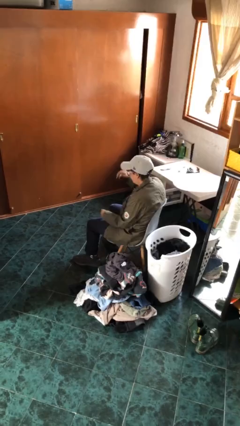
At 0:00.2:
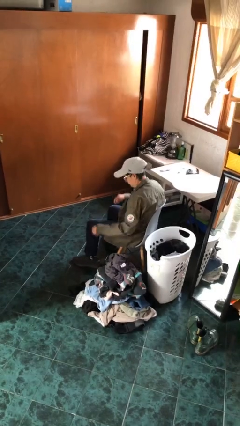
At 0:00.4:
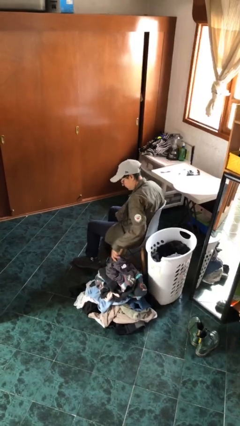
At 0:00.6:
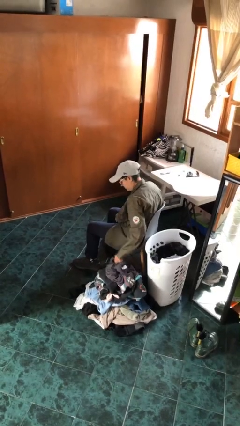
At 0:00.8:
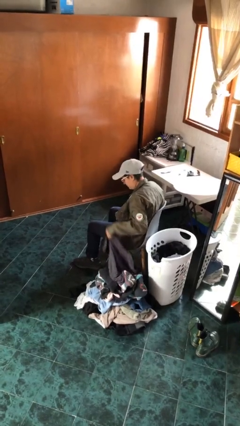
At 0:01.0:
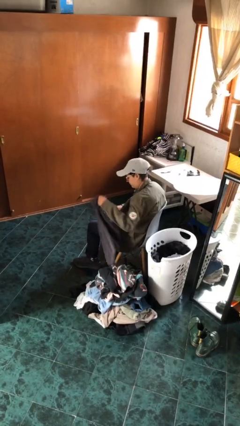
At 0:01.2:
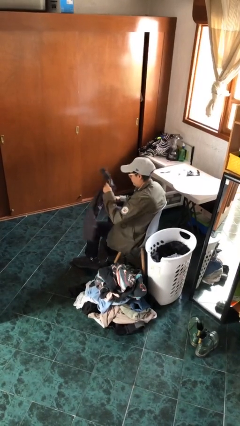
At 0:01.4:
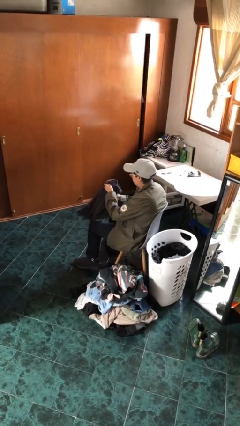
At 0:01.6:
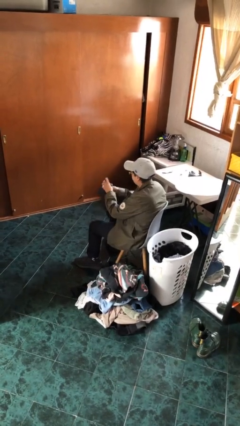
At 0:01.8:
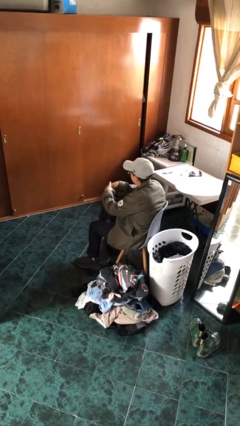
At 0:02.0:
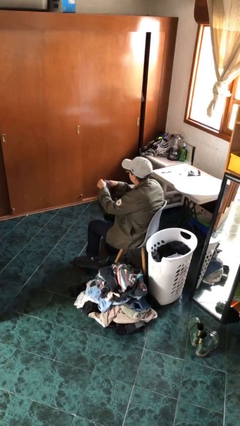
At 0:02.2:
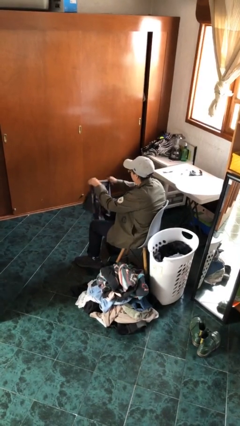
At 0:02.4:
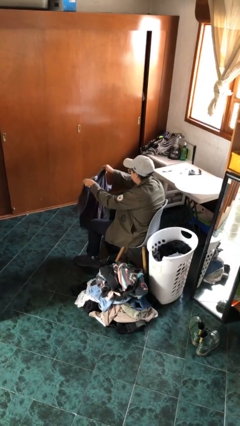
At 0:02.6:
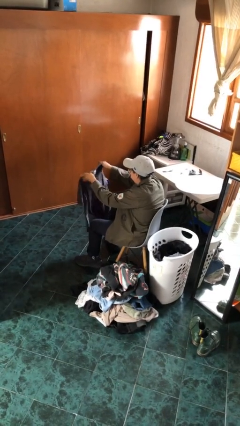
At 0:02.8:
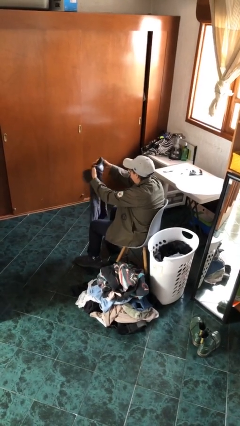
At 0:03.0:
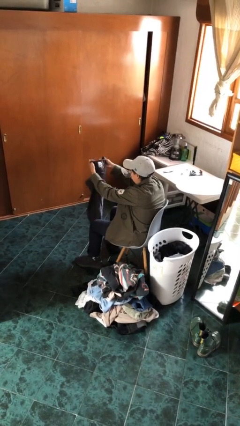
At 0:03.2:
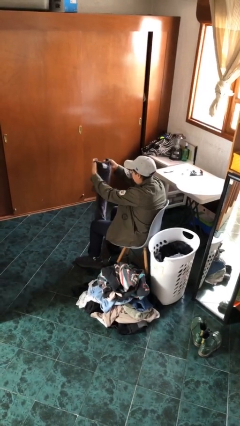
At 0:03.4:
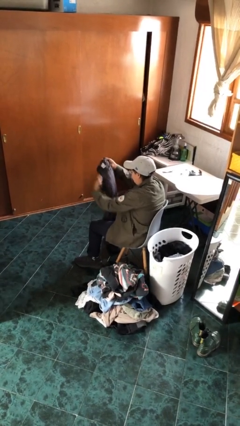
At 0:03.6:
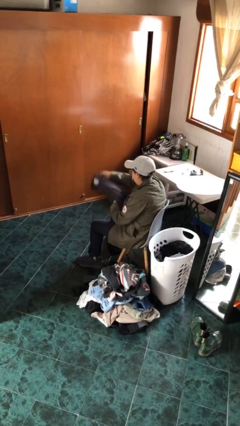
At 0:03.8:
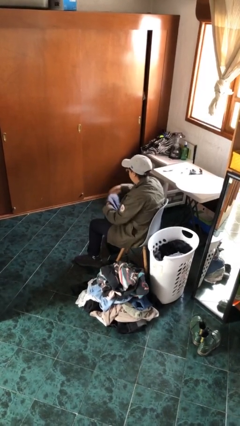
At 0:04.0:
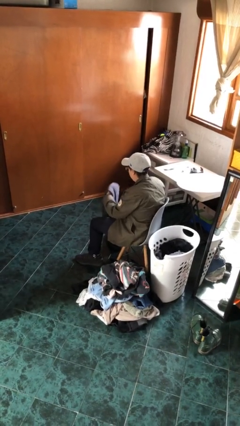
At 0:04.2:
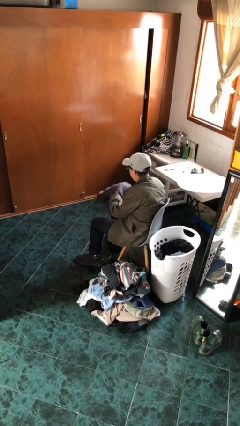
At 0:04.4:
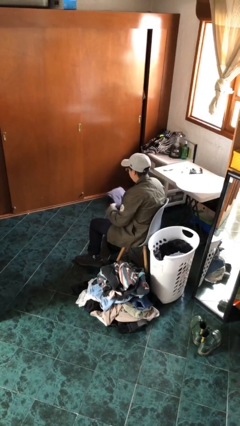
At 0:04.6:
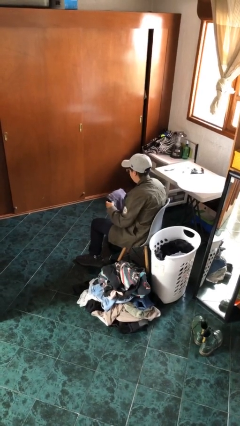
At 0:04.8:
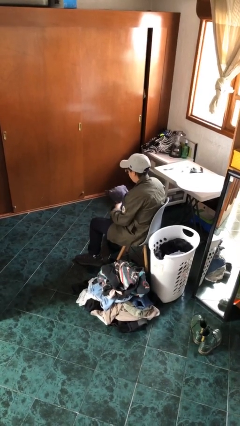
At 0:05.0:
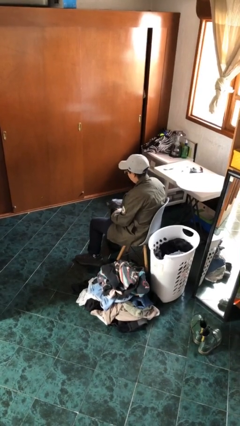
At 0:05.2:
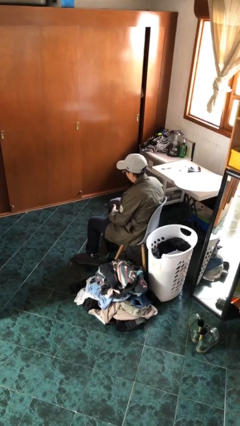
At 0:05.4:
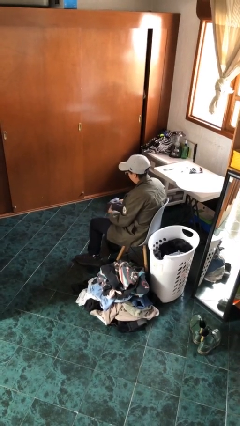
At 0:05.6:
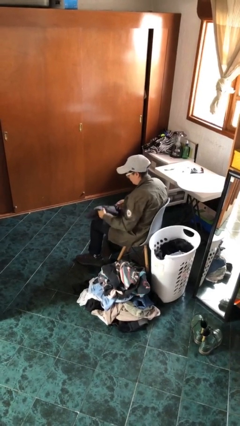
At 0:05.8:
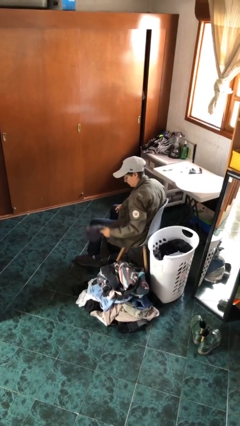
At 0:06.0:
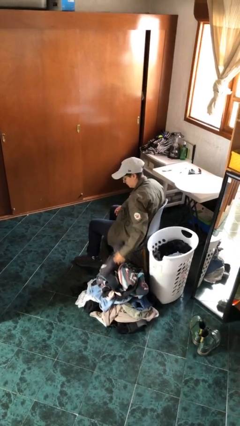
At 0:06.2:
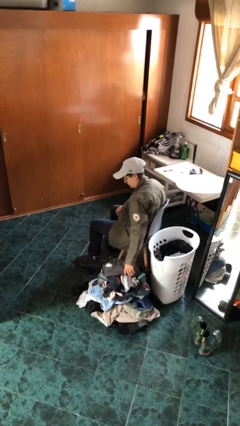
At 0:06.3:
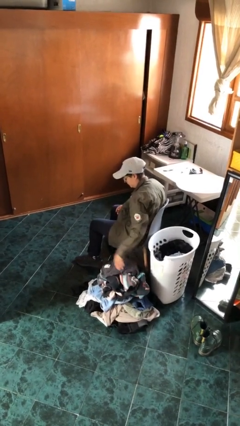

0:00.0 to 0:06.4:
person folds shirt

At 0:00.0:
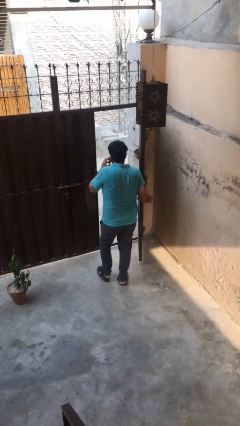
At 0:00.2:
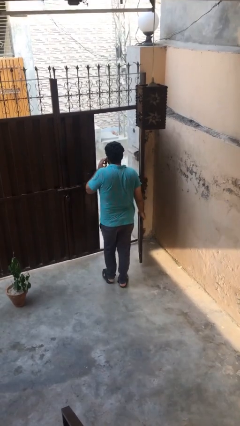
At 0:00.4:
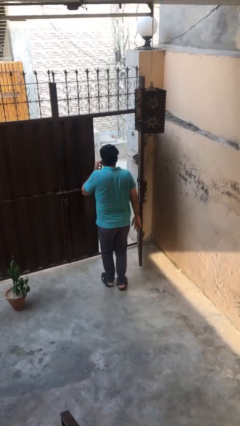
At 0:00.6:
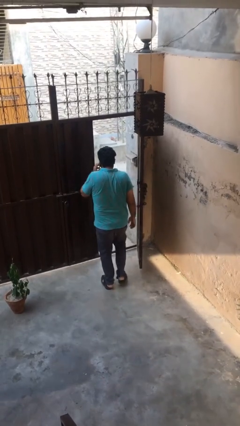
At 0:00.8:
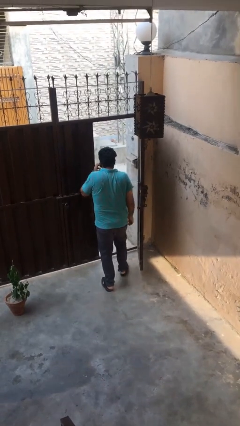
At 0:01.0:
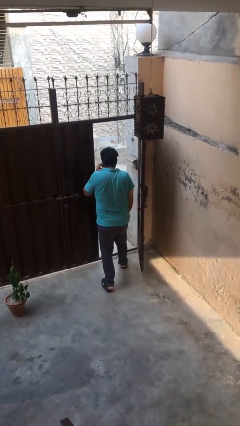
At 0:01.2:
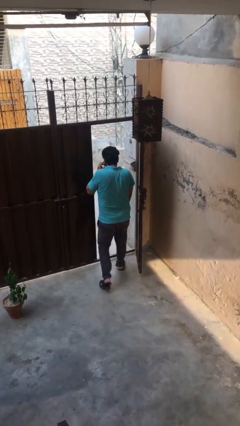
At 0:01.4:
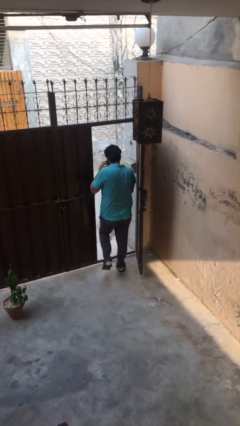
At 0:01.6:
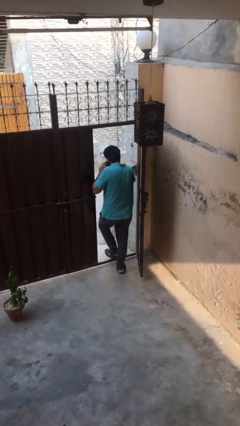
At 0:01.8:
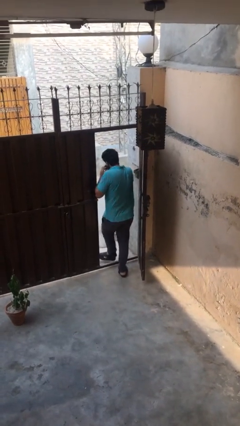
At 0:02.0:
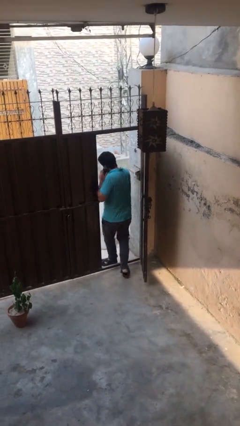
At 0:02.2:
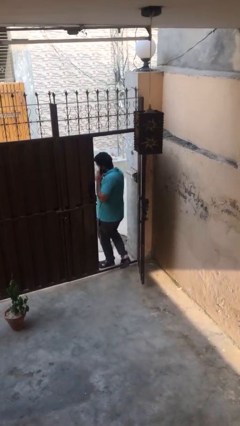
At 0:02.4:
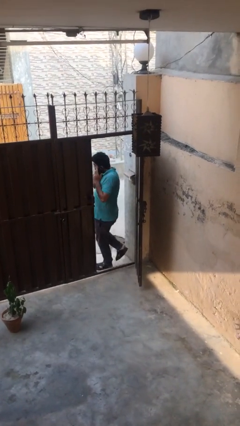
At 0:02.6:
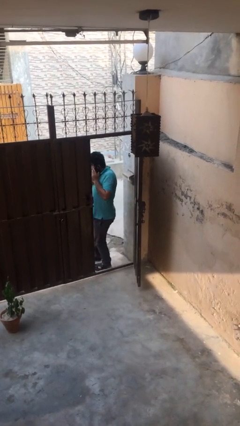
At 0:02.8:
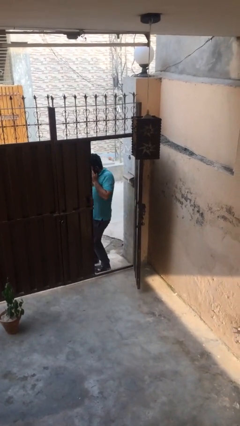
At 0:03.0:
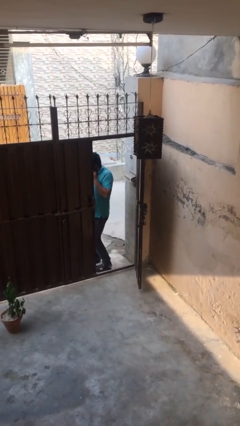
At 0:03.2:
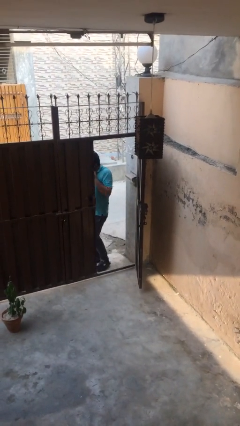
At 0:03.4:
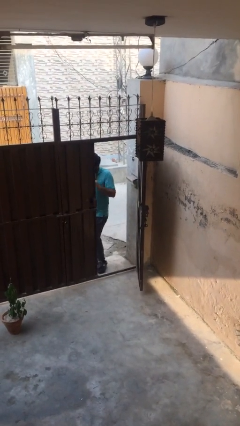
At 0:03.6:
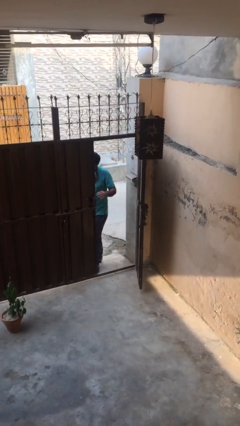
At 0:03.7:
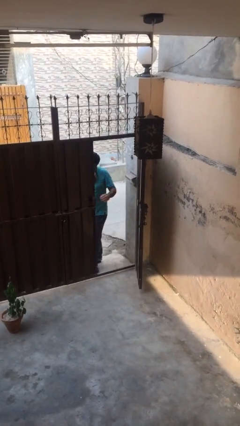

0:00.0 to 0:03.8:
person exits scene through structure

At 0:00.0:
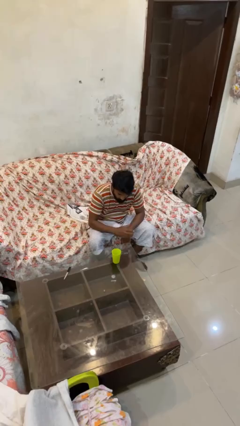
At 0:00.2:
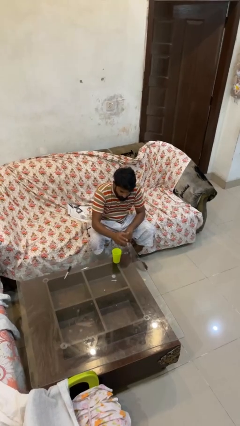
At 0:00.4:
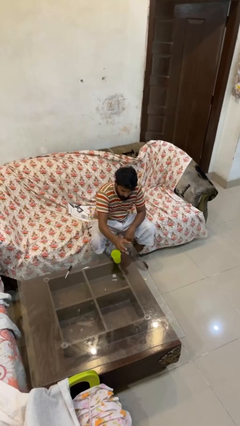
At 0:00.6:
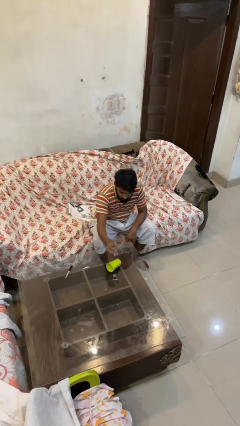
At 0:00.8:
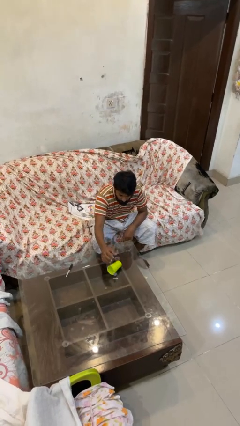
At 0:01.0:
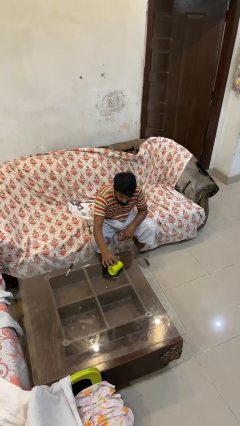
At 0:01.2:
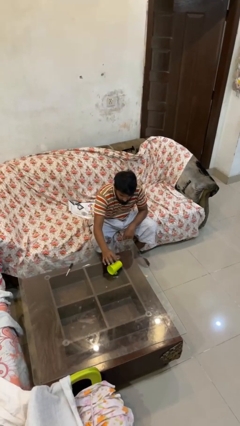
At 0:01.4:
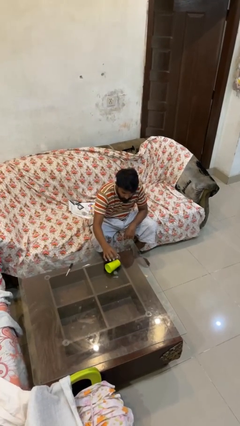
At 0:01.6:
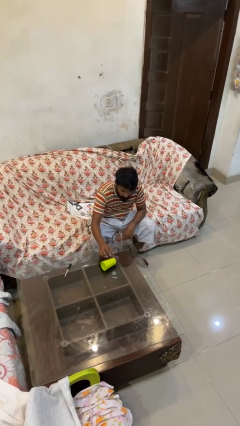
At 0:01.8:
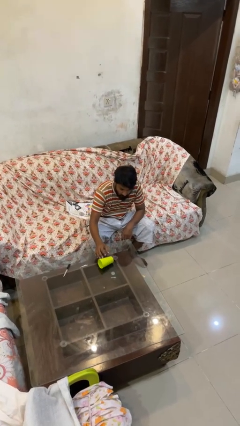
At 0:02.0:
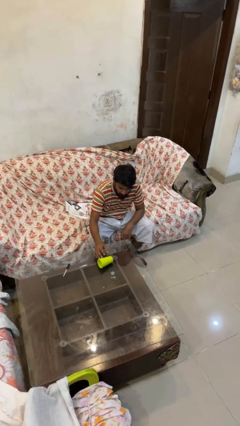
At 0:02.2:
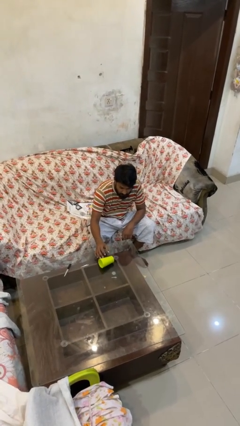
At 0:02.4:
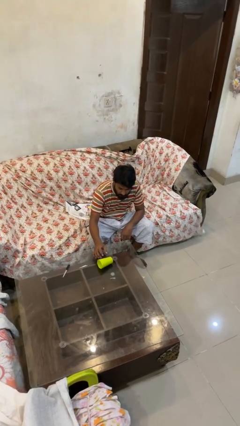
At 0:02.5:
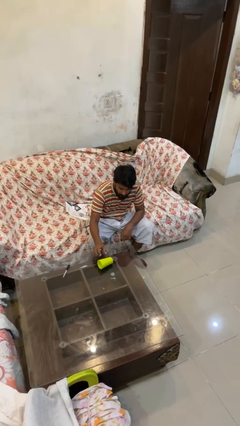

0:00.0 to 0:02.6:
person knocks over glass

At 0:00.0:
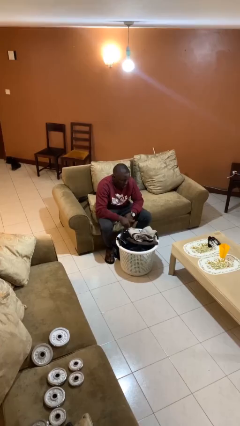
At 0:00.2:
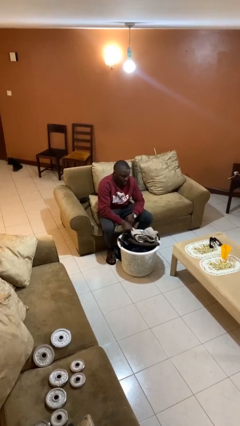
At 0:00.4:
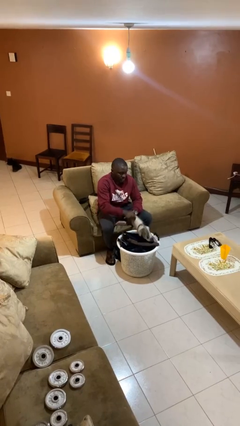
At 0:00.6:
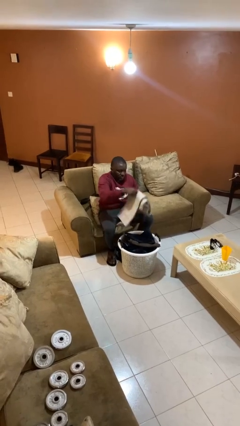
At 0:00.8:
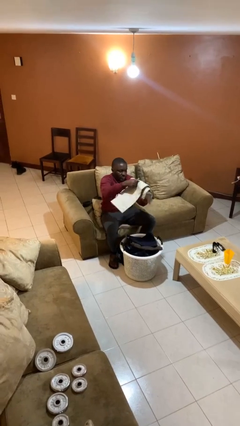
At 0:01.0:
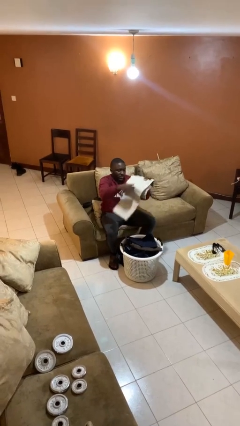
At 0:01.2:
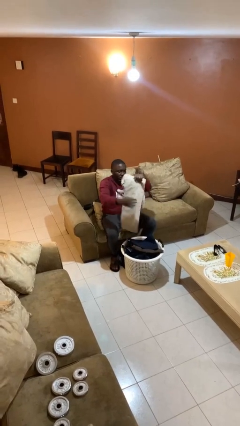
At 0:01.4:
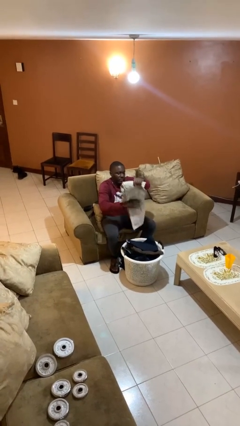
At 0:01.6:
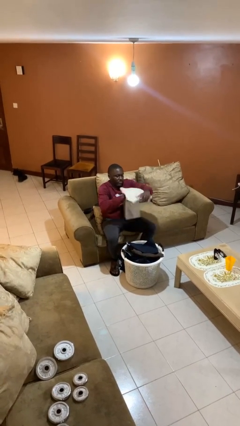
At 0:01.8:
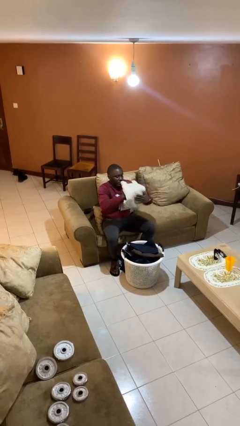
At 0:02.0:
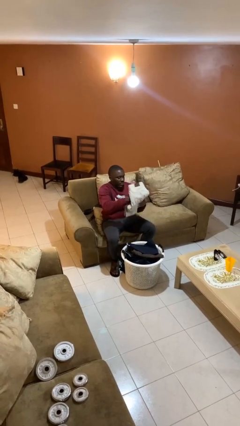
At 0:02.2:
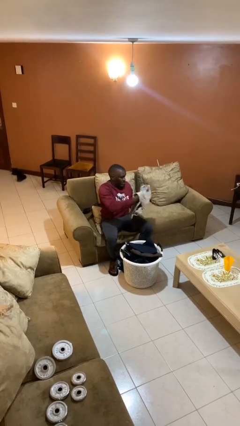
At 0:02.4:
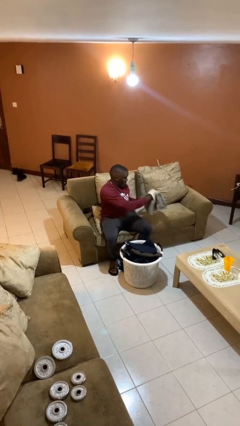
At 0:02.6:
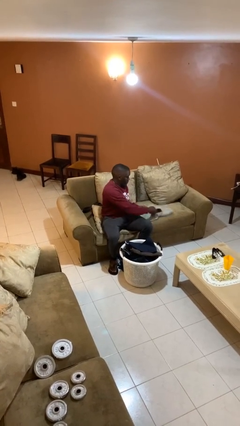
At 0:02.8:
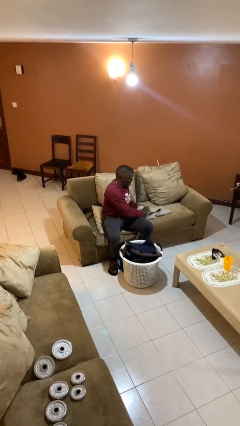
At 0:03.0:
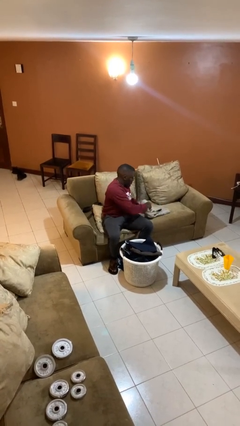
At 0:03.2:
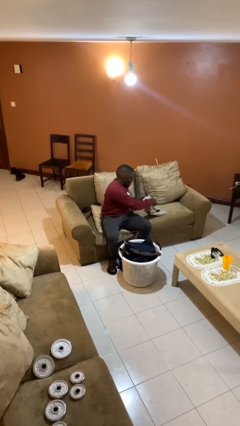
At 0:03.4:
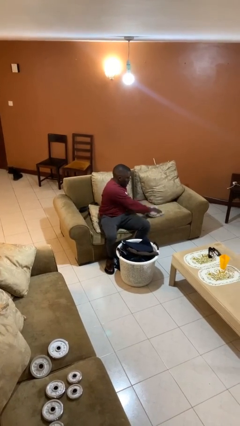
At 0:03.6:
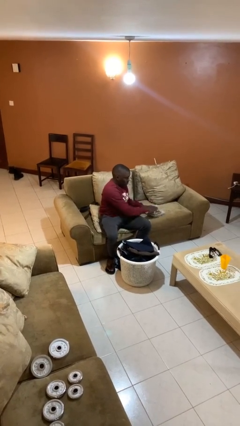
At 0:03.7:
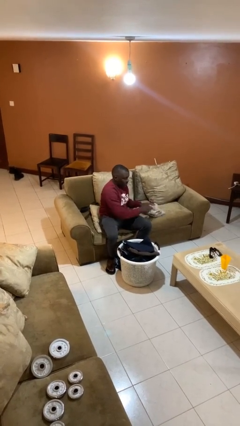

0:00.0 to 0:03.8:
person folds pants

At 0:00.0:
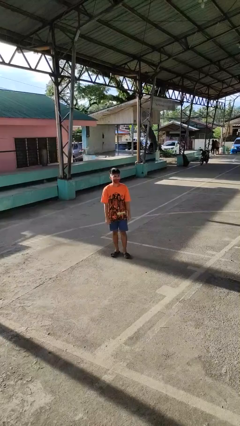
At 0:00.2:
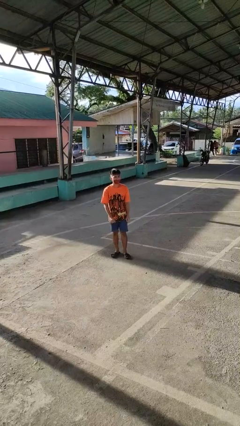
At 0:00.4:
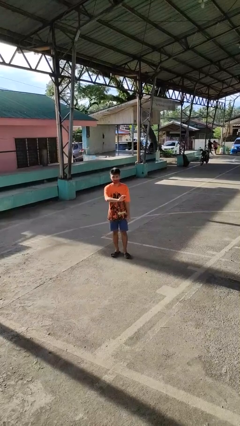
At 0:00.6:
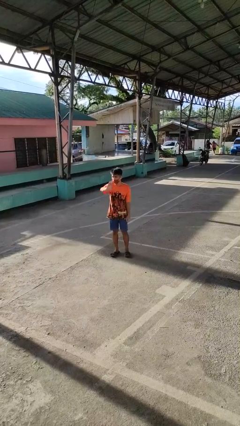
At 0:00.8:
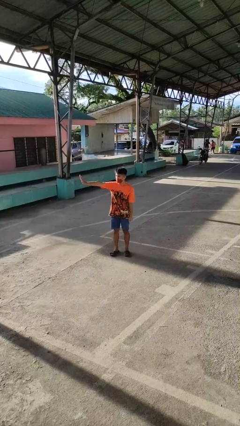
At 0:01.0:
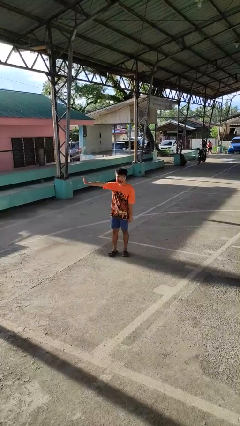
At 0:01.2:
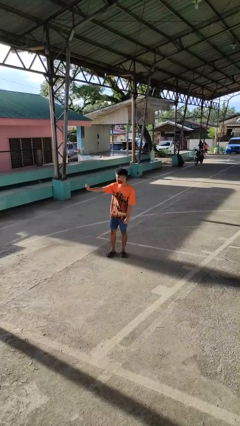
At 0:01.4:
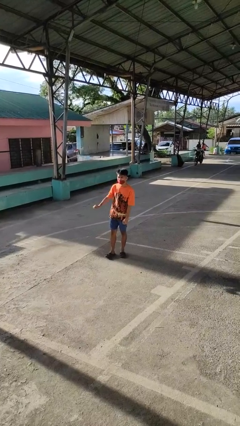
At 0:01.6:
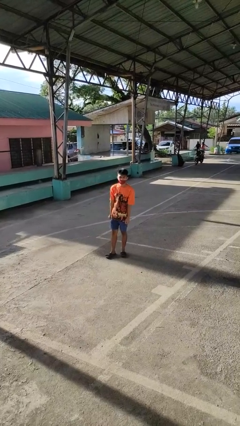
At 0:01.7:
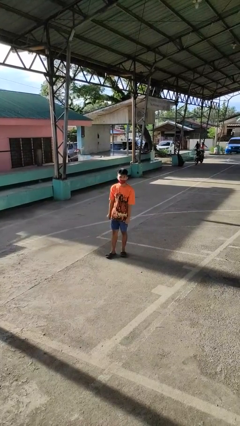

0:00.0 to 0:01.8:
person gestures swipe right
